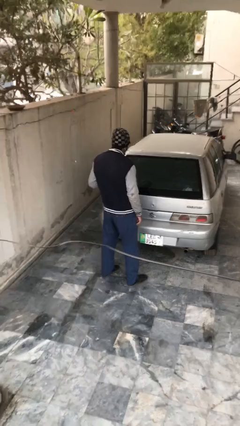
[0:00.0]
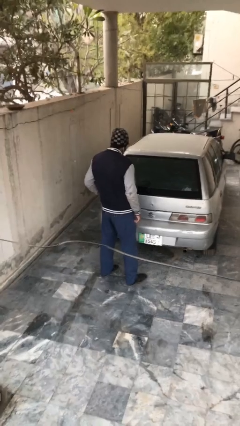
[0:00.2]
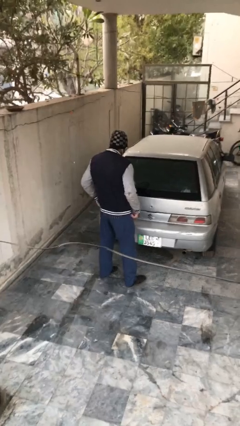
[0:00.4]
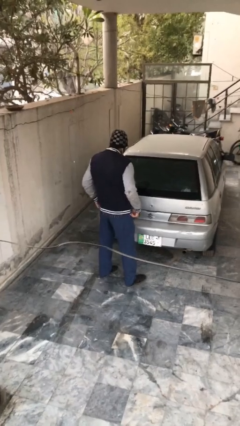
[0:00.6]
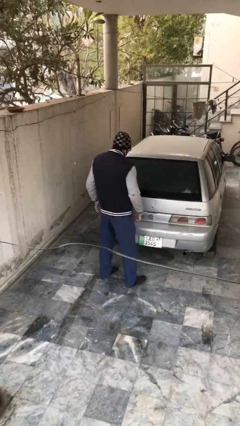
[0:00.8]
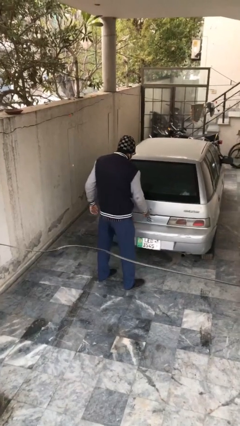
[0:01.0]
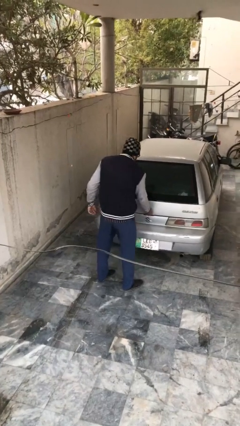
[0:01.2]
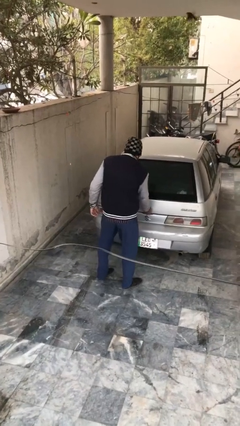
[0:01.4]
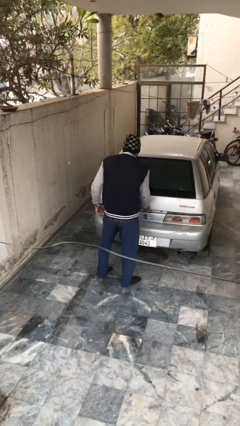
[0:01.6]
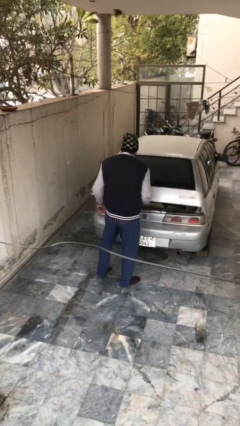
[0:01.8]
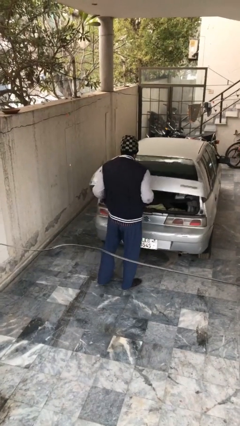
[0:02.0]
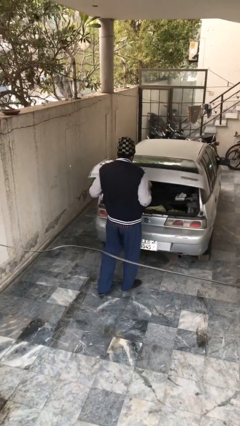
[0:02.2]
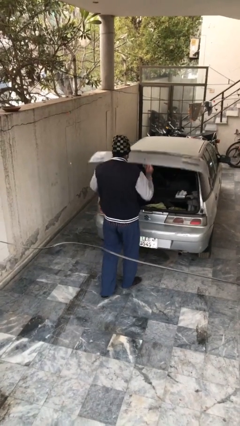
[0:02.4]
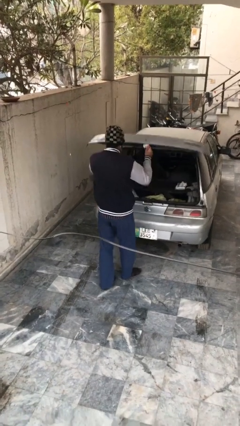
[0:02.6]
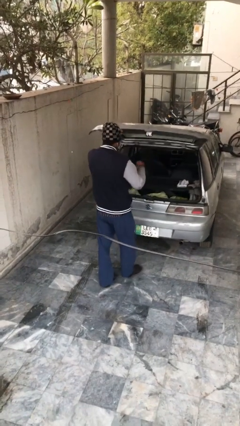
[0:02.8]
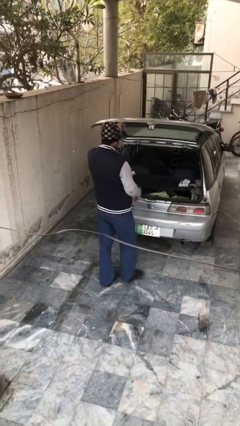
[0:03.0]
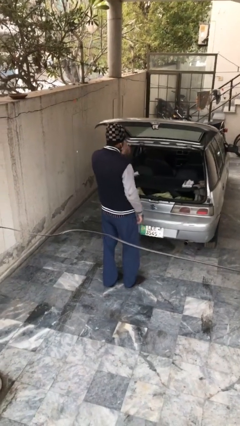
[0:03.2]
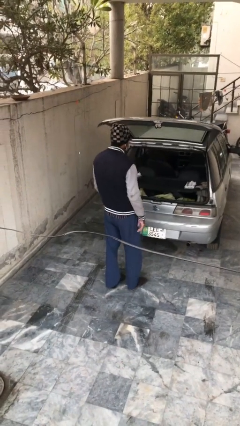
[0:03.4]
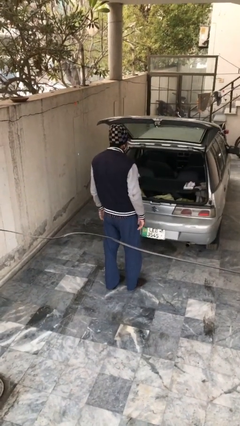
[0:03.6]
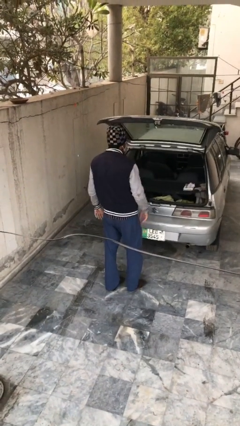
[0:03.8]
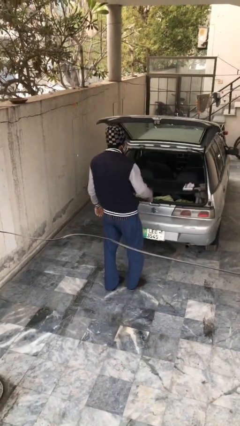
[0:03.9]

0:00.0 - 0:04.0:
person opens car trunk

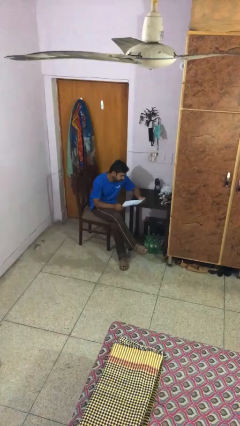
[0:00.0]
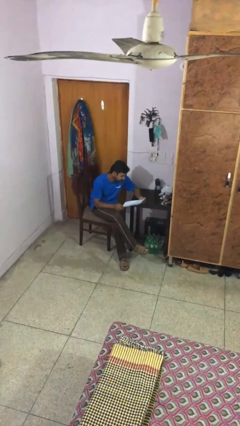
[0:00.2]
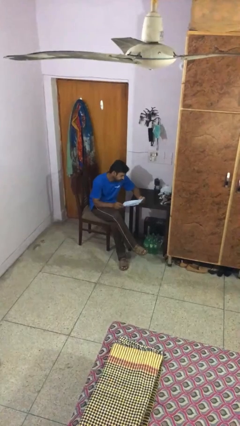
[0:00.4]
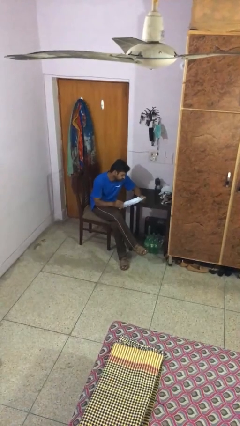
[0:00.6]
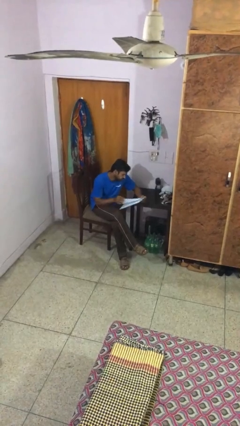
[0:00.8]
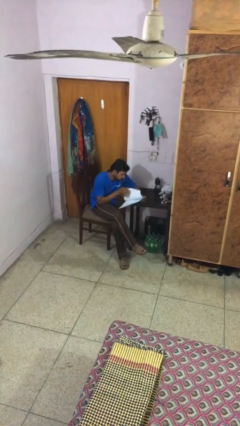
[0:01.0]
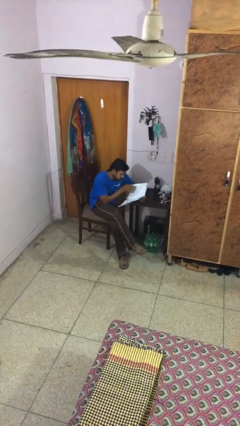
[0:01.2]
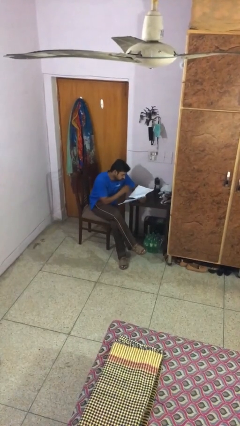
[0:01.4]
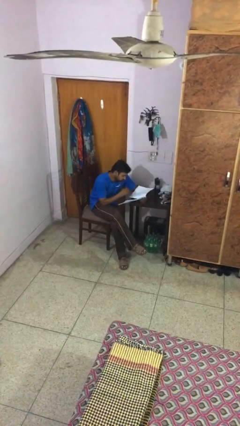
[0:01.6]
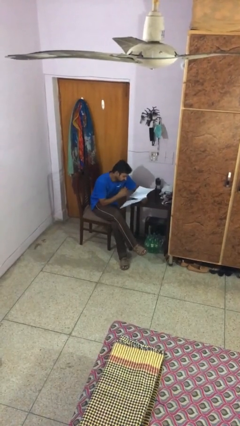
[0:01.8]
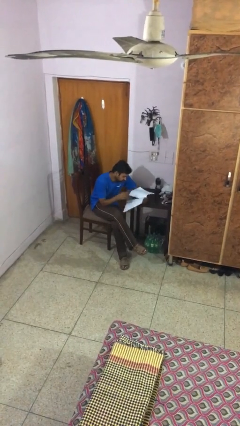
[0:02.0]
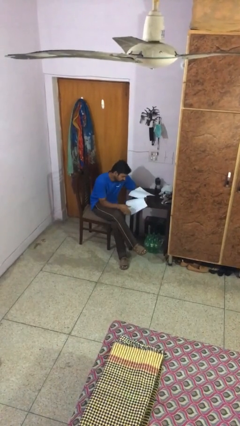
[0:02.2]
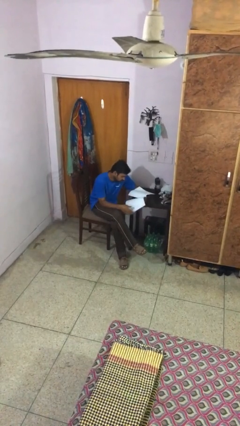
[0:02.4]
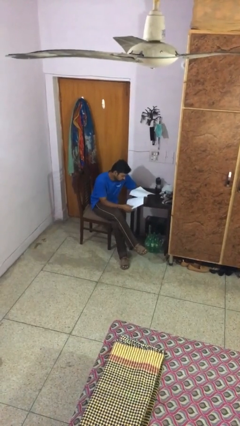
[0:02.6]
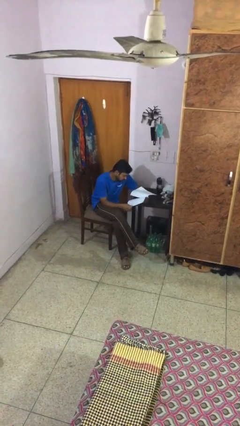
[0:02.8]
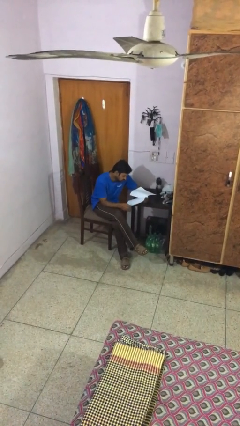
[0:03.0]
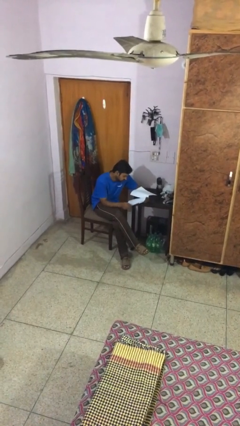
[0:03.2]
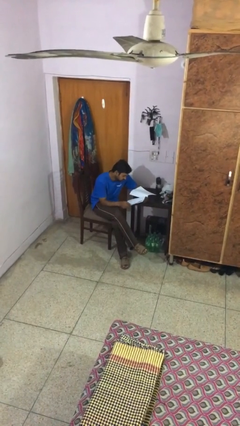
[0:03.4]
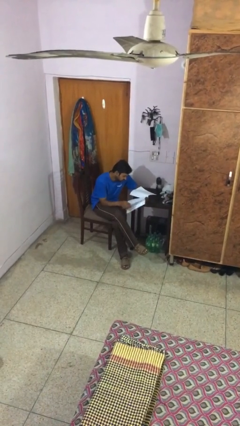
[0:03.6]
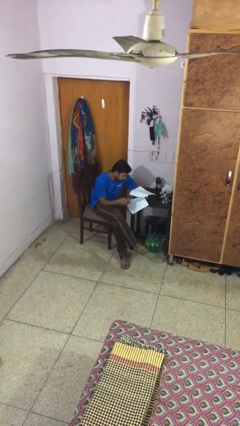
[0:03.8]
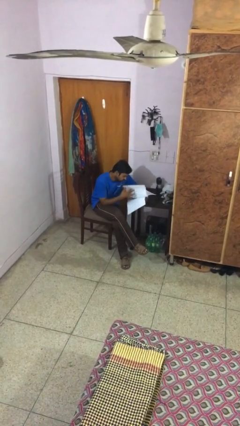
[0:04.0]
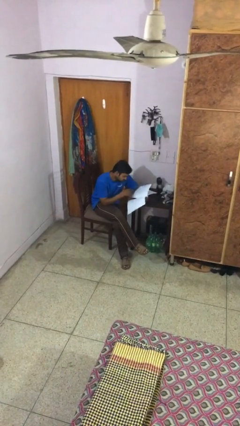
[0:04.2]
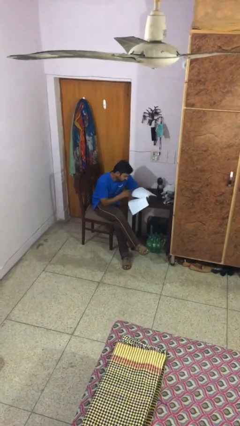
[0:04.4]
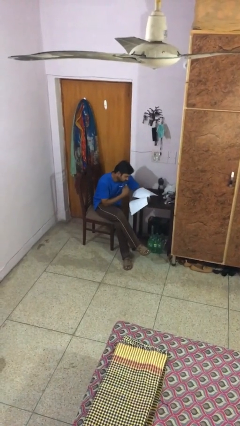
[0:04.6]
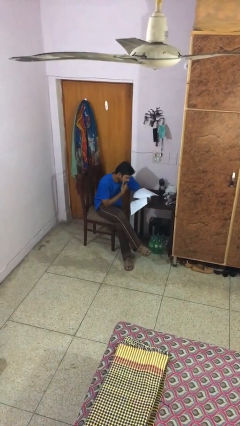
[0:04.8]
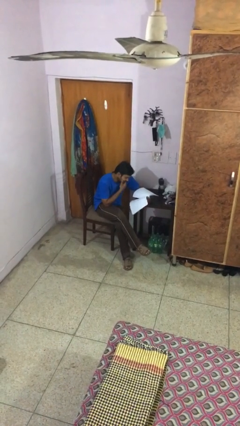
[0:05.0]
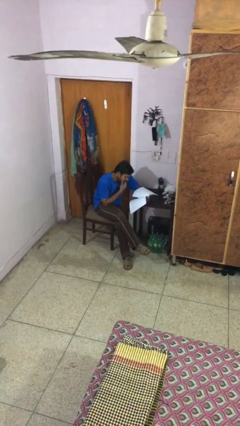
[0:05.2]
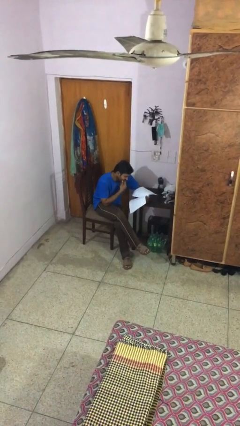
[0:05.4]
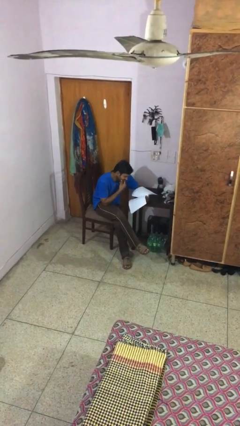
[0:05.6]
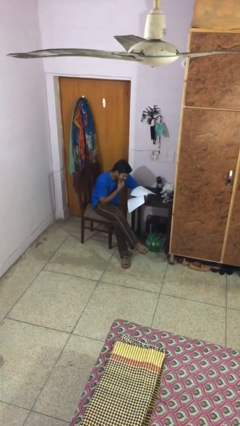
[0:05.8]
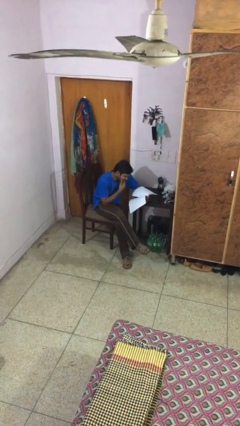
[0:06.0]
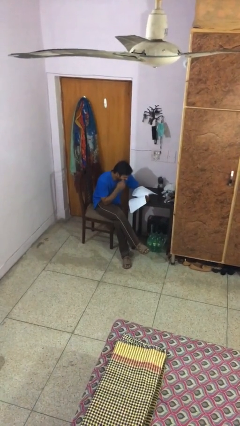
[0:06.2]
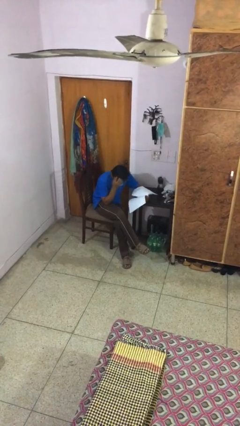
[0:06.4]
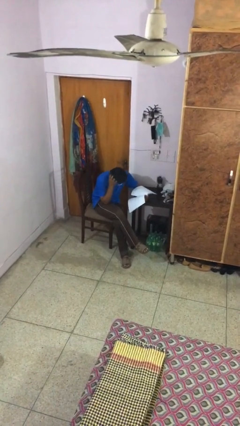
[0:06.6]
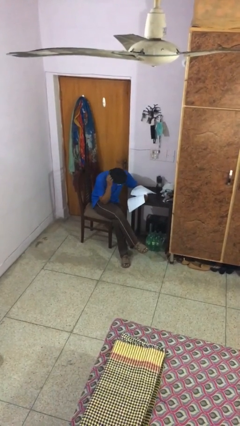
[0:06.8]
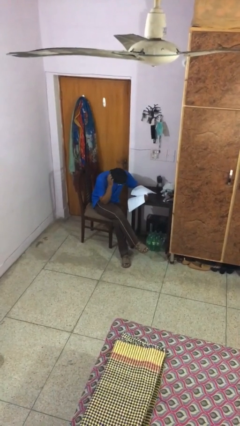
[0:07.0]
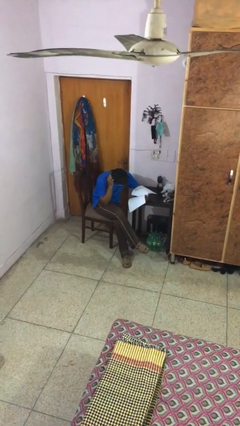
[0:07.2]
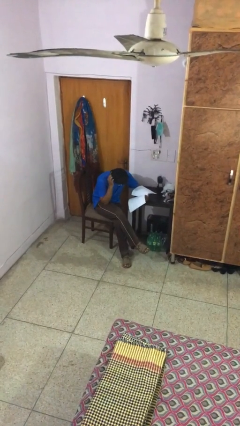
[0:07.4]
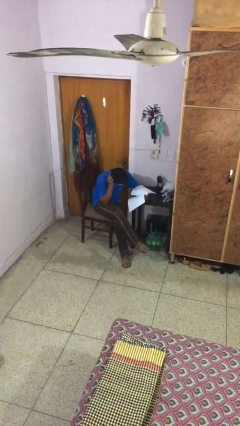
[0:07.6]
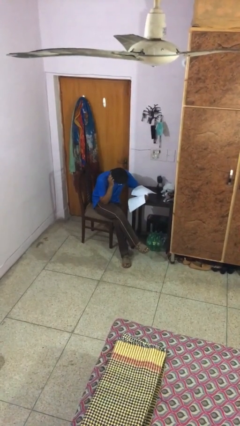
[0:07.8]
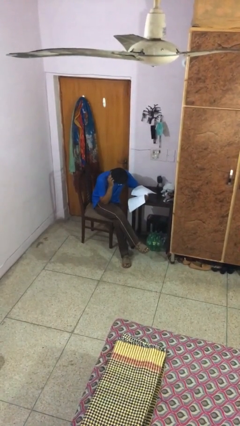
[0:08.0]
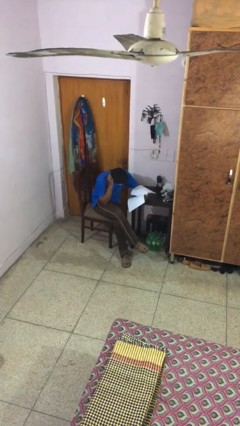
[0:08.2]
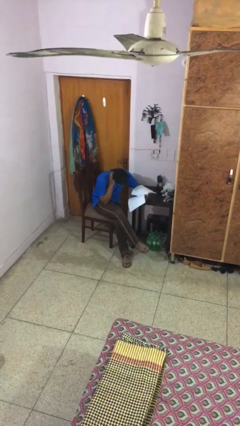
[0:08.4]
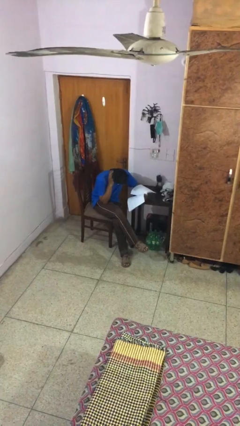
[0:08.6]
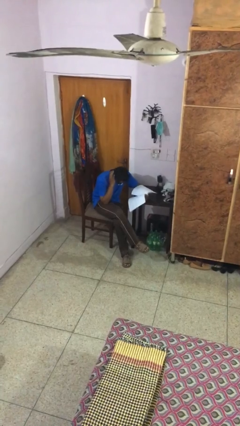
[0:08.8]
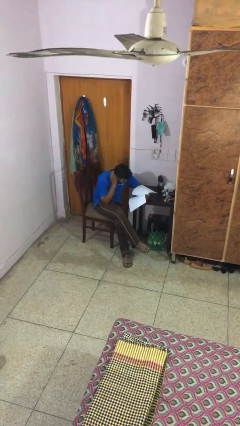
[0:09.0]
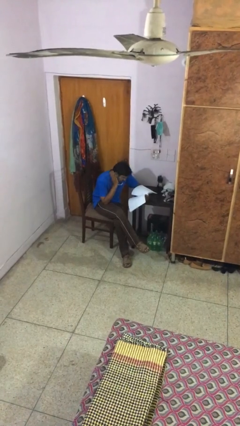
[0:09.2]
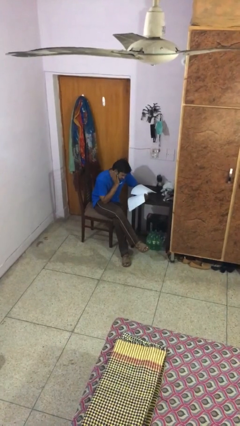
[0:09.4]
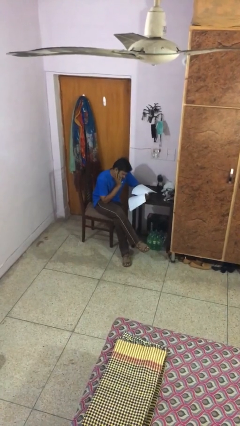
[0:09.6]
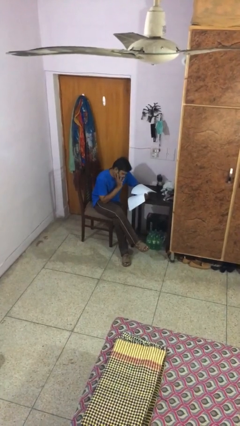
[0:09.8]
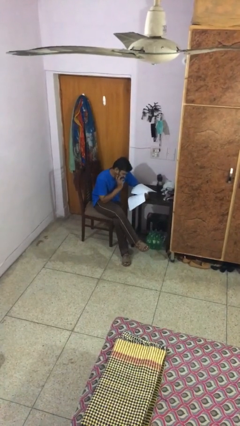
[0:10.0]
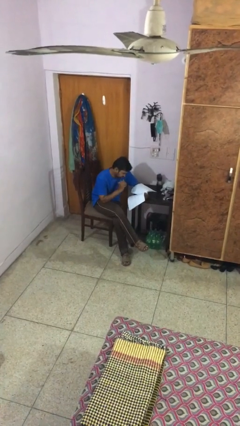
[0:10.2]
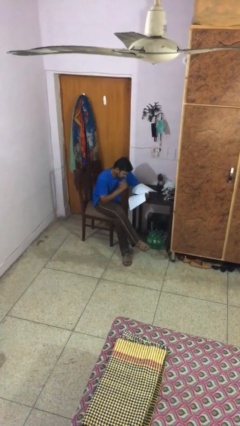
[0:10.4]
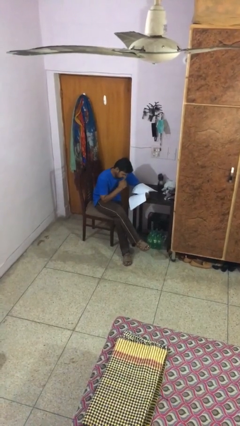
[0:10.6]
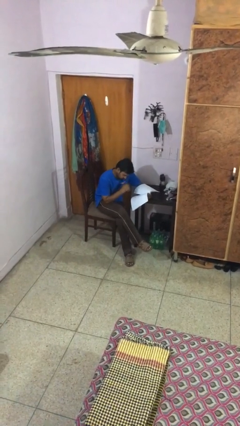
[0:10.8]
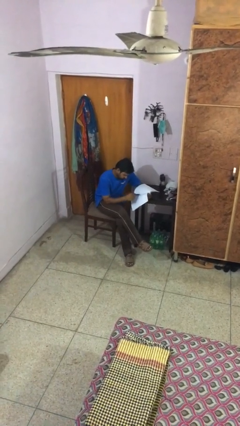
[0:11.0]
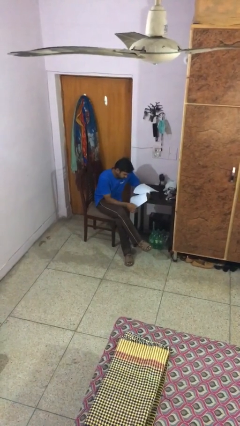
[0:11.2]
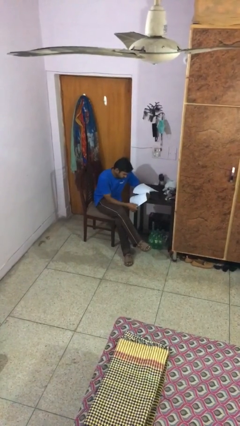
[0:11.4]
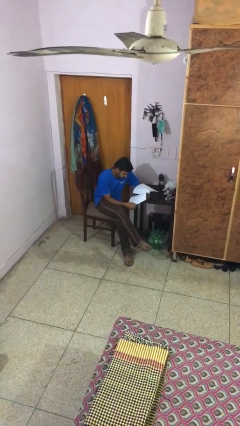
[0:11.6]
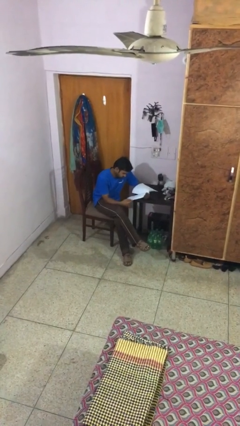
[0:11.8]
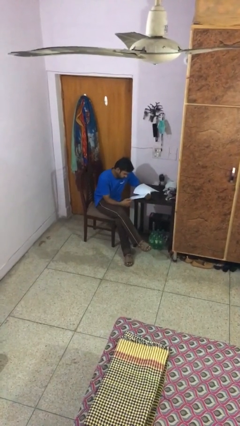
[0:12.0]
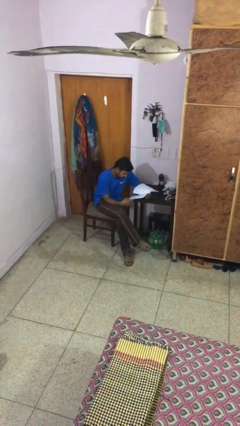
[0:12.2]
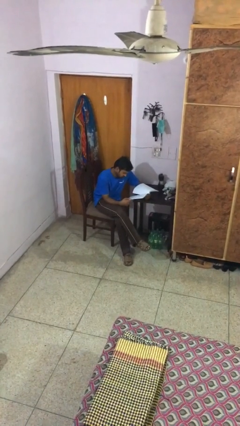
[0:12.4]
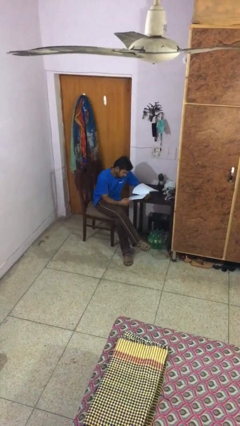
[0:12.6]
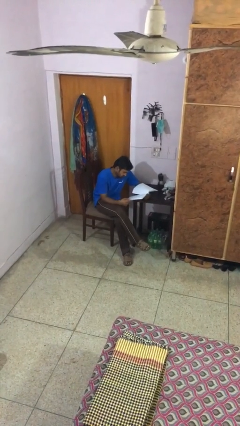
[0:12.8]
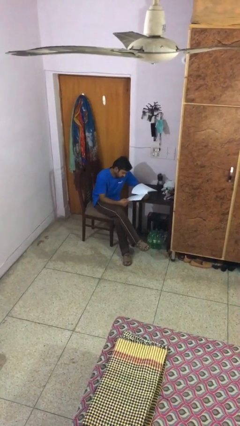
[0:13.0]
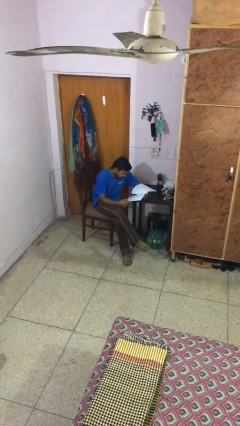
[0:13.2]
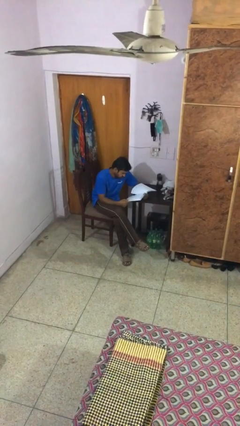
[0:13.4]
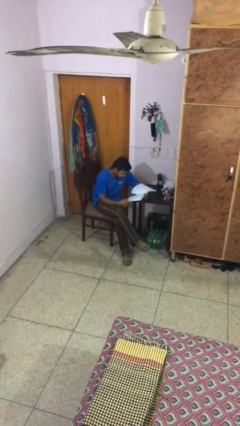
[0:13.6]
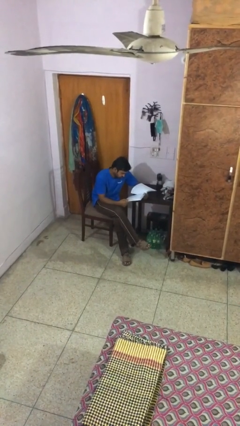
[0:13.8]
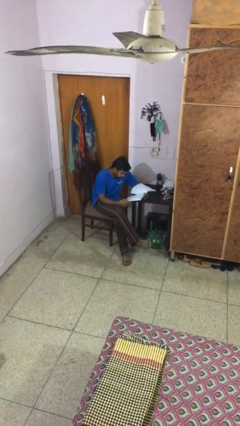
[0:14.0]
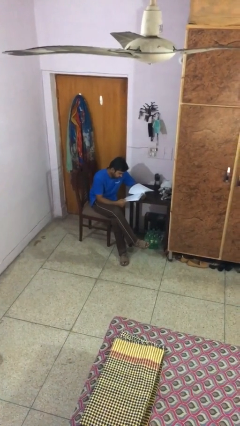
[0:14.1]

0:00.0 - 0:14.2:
person reads document
